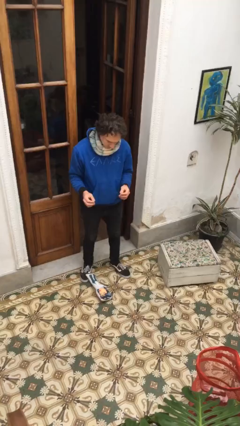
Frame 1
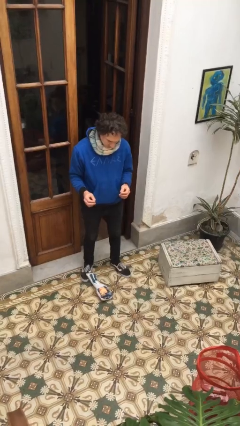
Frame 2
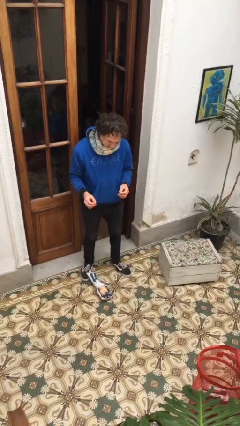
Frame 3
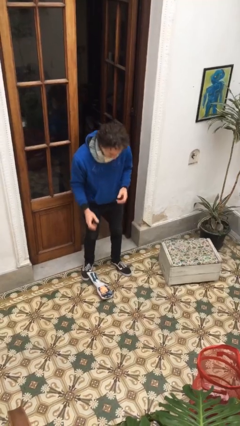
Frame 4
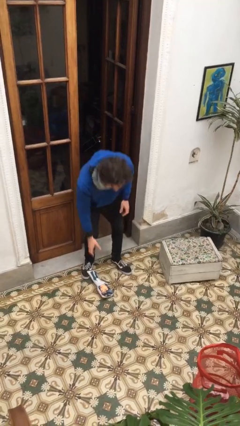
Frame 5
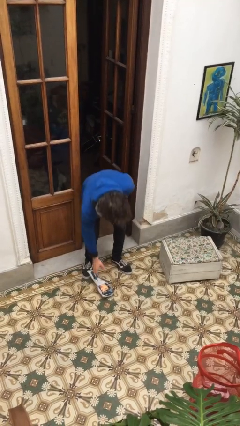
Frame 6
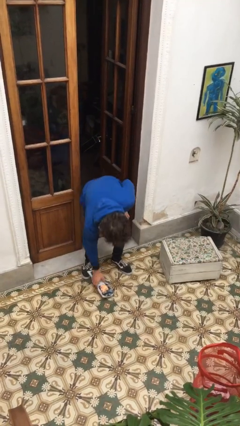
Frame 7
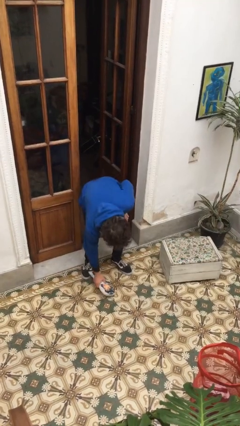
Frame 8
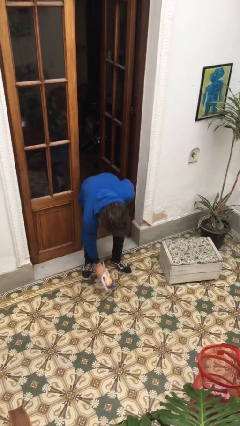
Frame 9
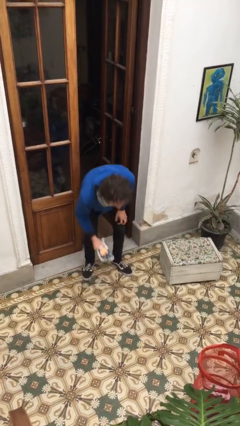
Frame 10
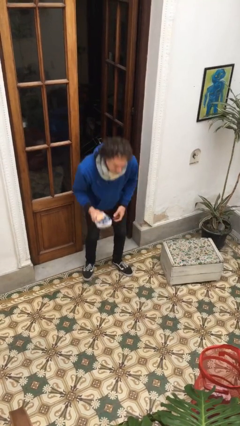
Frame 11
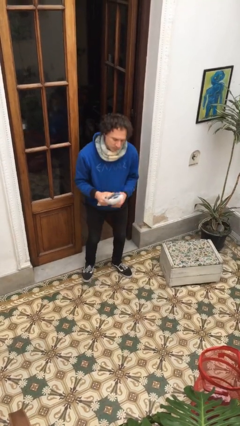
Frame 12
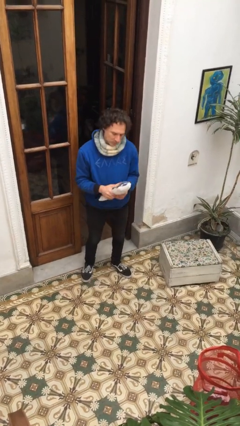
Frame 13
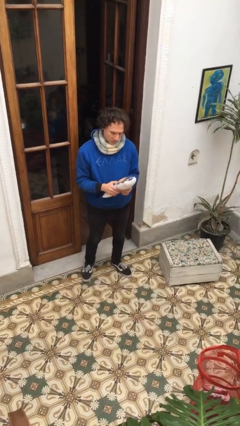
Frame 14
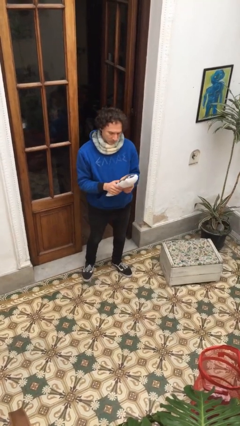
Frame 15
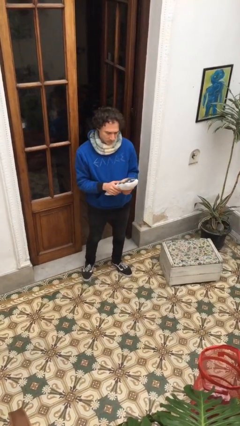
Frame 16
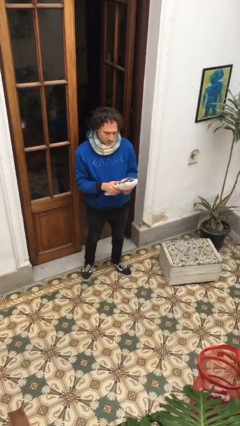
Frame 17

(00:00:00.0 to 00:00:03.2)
person picks up object from floor

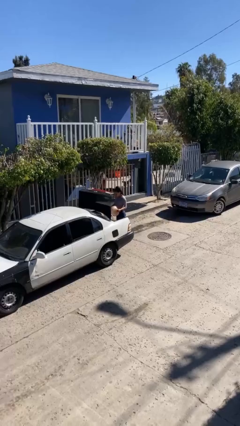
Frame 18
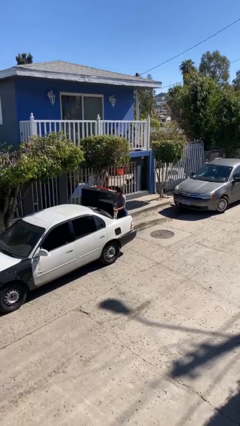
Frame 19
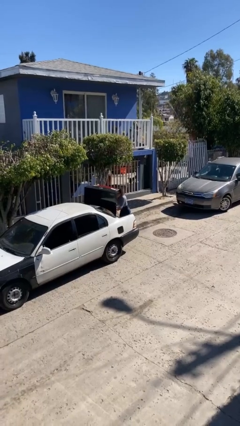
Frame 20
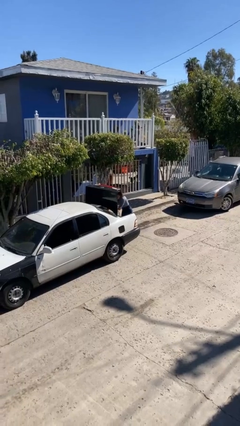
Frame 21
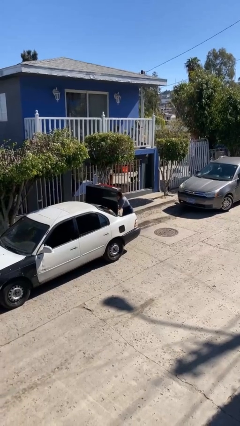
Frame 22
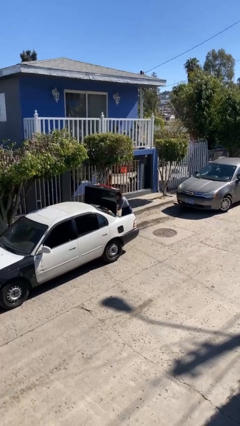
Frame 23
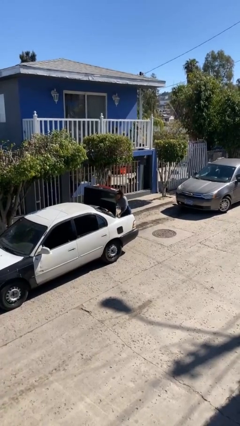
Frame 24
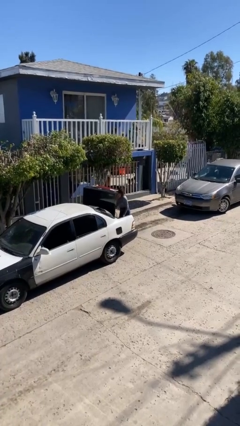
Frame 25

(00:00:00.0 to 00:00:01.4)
person loads car

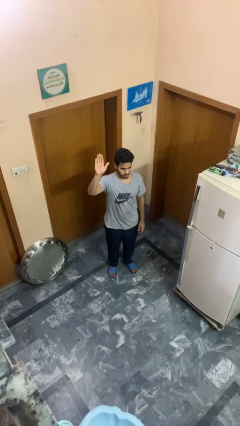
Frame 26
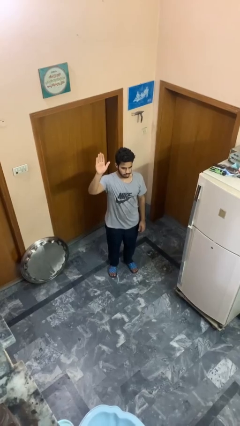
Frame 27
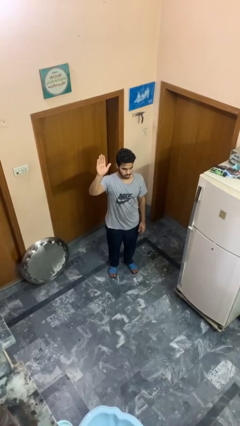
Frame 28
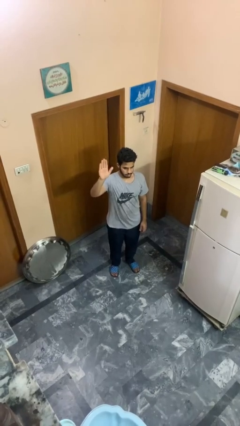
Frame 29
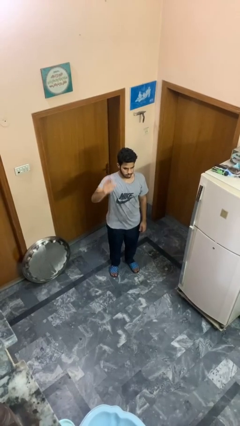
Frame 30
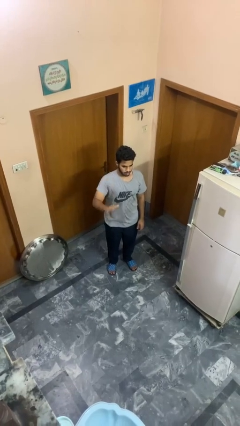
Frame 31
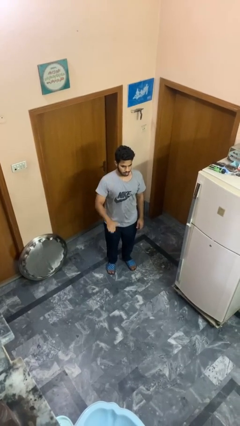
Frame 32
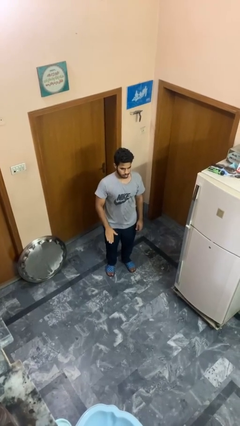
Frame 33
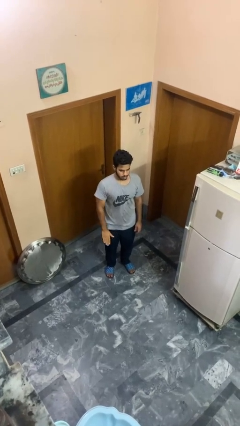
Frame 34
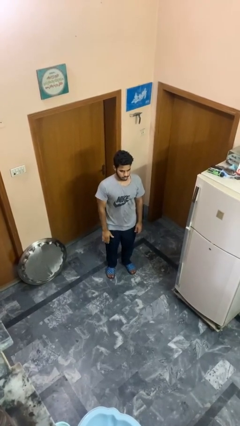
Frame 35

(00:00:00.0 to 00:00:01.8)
person gestures lower hand

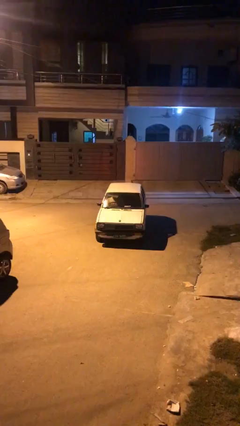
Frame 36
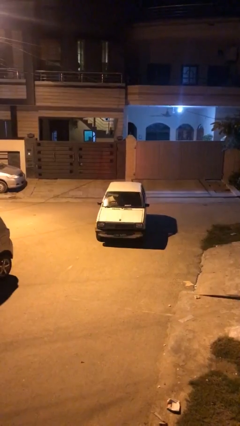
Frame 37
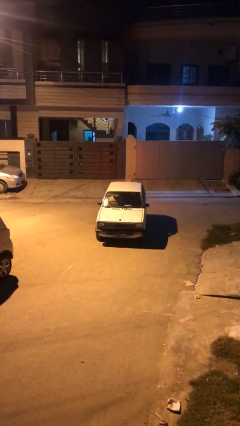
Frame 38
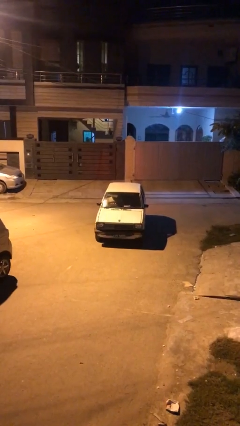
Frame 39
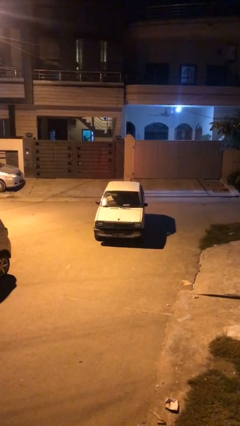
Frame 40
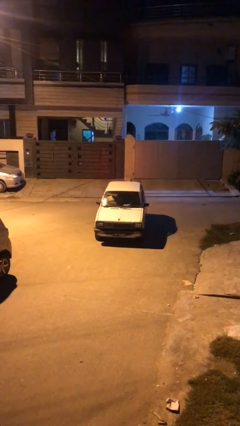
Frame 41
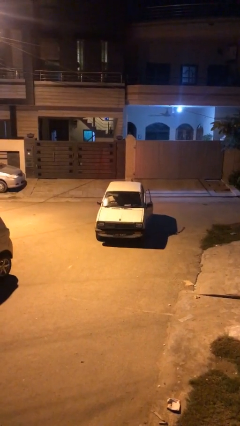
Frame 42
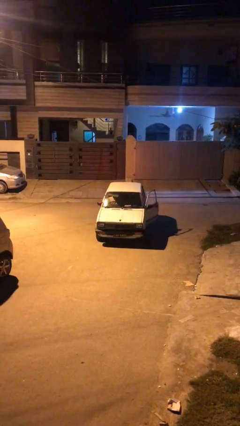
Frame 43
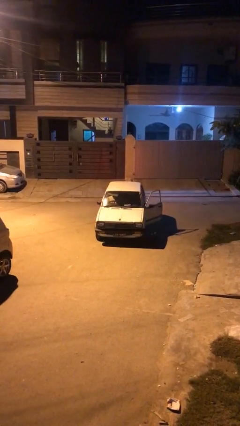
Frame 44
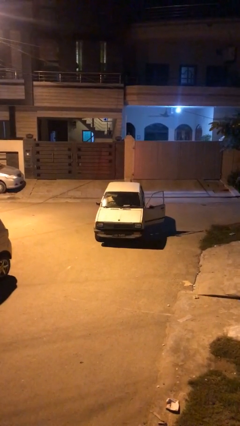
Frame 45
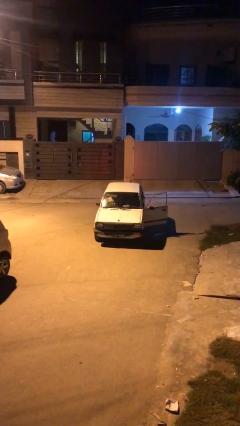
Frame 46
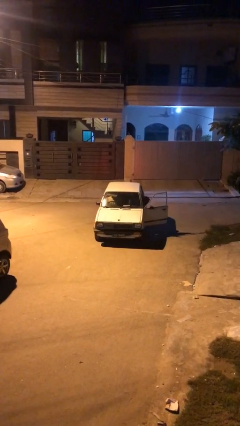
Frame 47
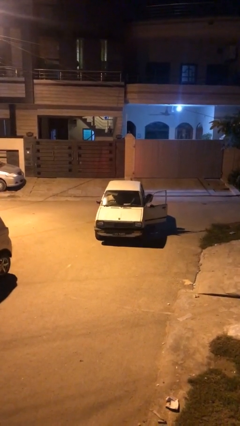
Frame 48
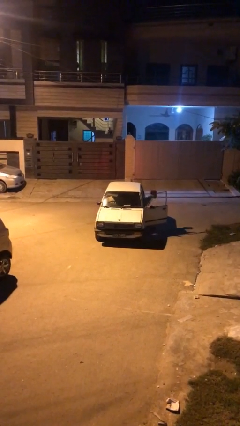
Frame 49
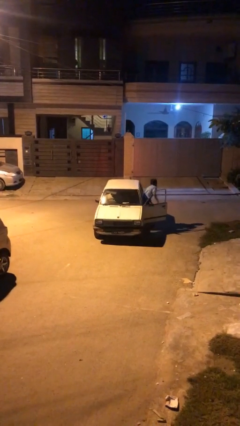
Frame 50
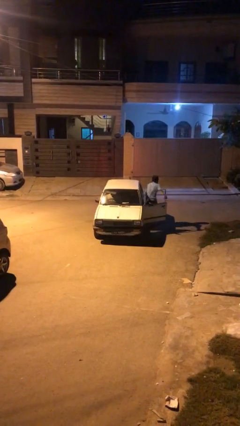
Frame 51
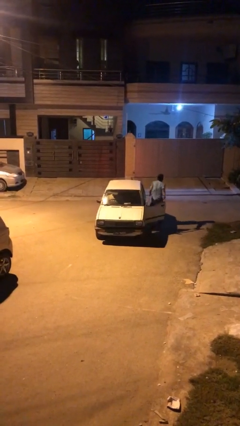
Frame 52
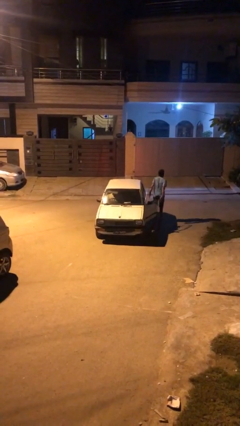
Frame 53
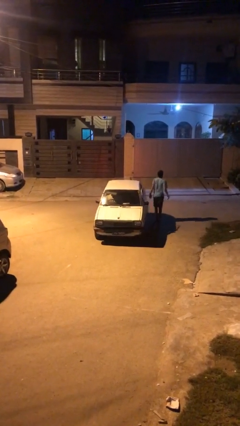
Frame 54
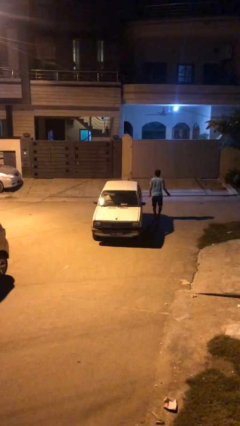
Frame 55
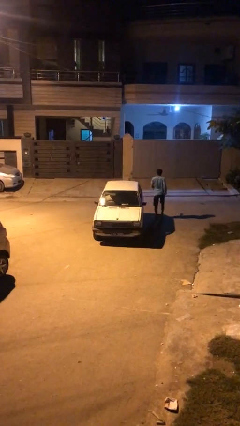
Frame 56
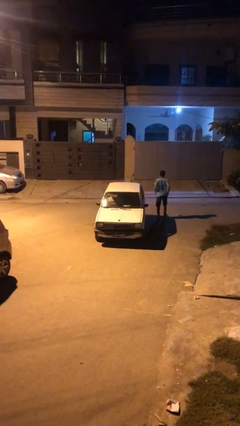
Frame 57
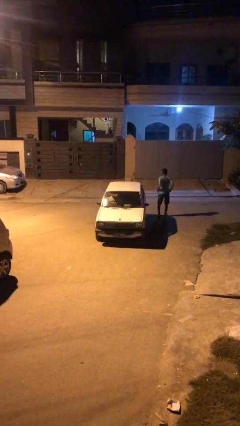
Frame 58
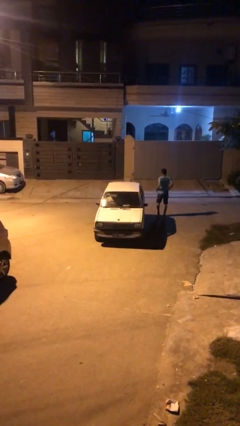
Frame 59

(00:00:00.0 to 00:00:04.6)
car drops off person

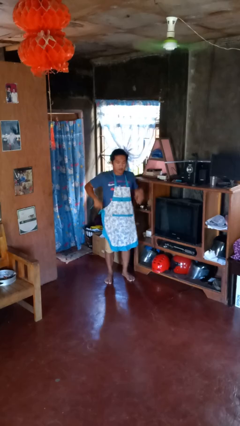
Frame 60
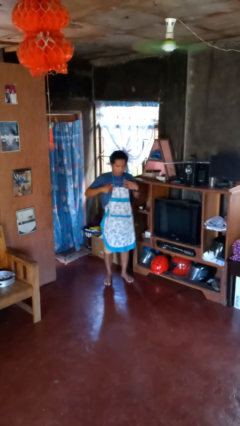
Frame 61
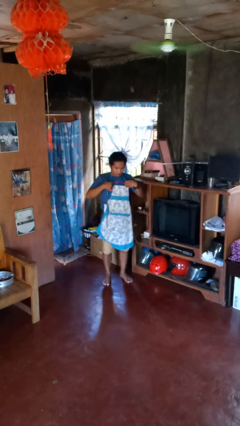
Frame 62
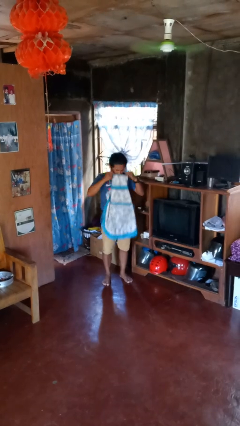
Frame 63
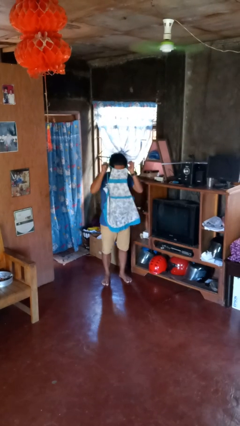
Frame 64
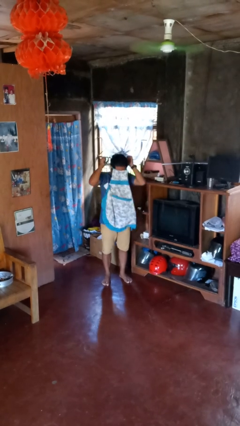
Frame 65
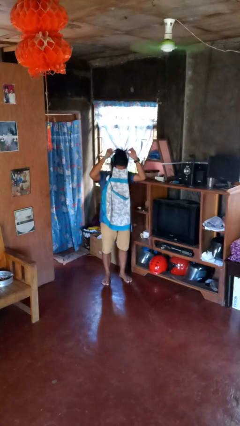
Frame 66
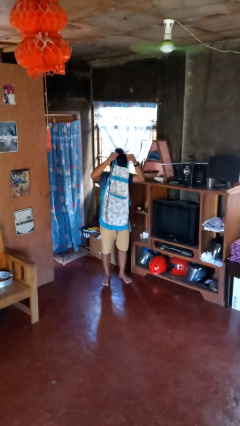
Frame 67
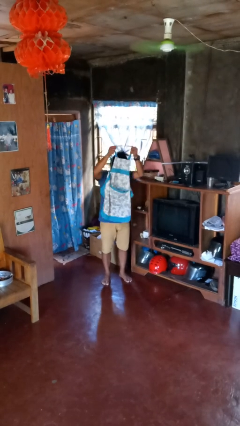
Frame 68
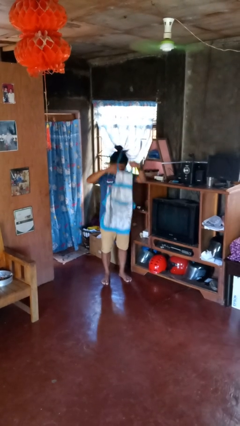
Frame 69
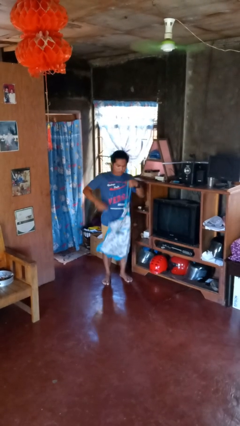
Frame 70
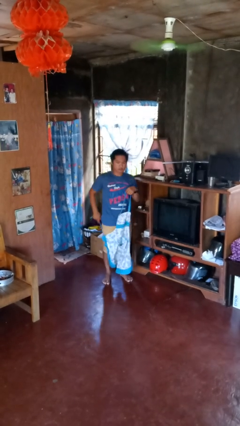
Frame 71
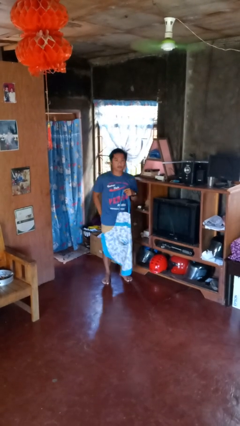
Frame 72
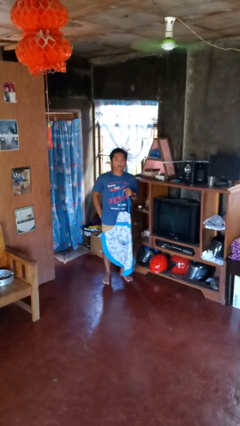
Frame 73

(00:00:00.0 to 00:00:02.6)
person takes off apron

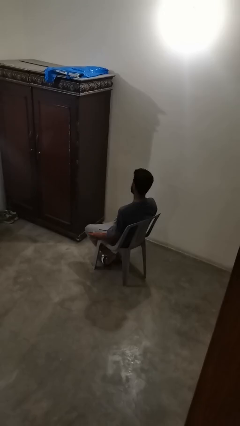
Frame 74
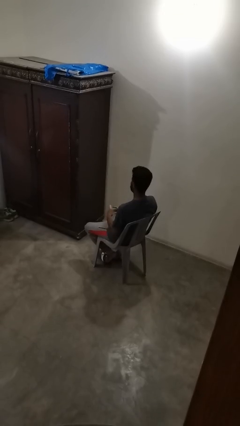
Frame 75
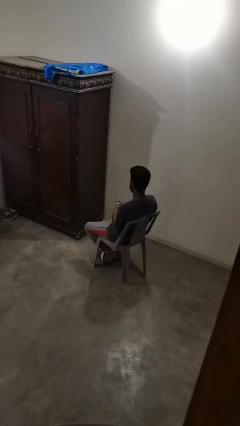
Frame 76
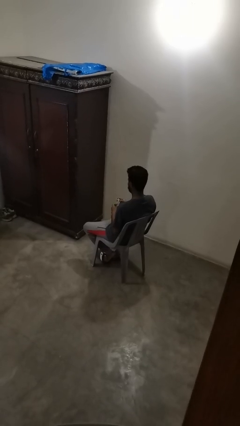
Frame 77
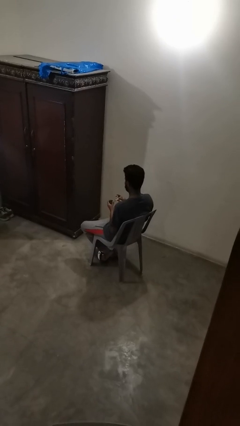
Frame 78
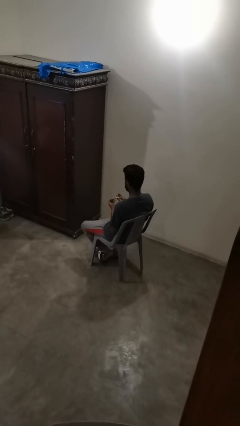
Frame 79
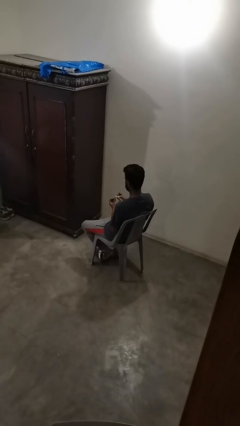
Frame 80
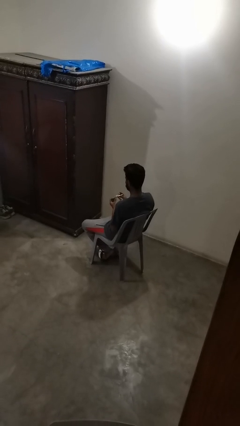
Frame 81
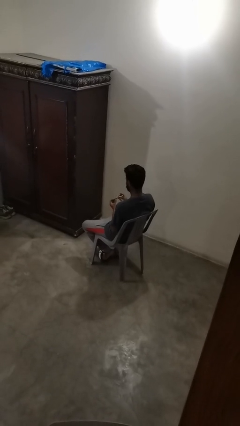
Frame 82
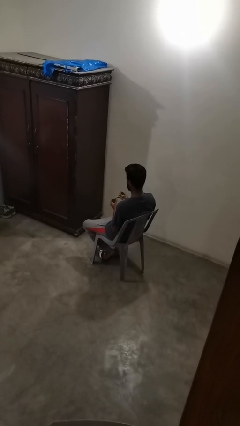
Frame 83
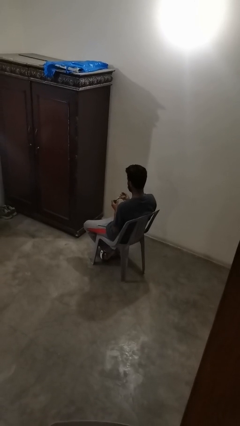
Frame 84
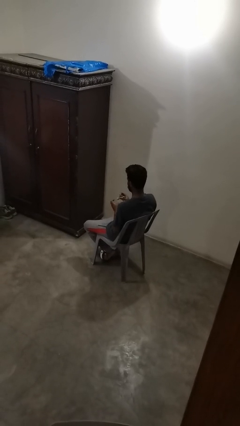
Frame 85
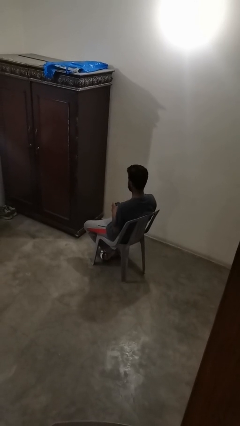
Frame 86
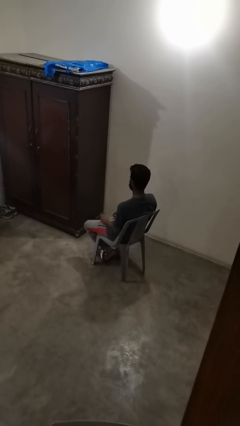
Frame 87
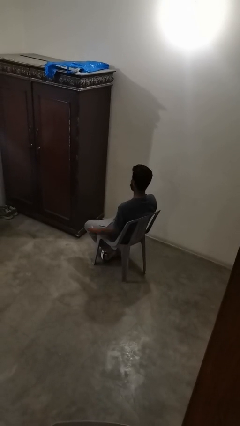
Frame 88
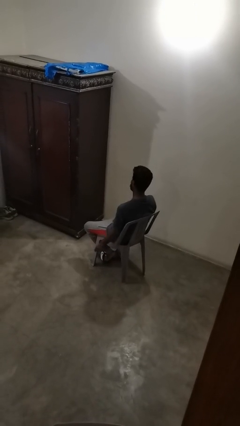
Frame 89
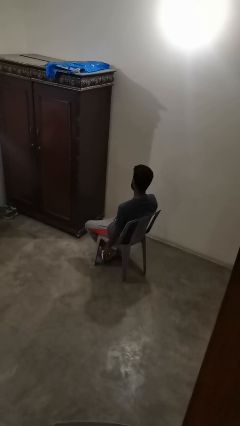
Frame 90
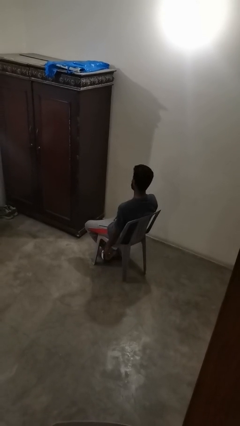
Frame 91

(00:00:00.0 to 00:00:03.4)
person clips fingernails

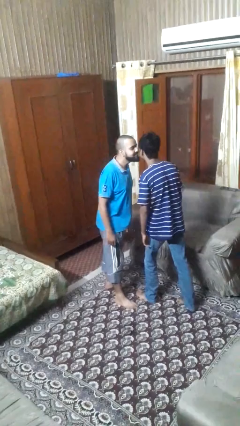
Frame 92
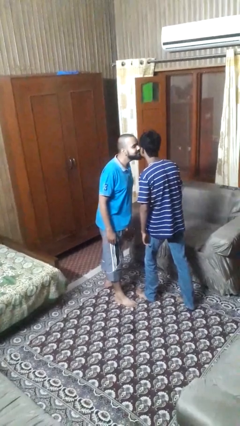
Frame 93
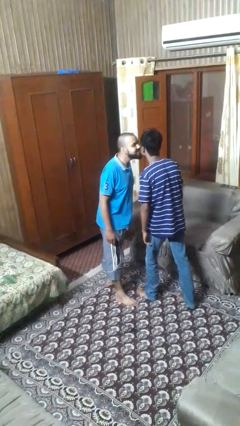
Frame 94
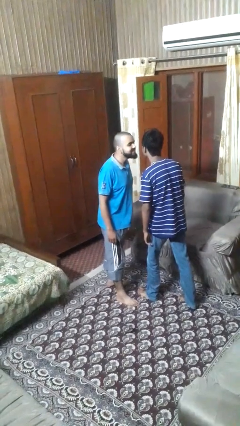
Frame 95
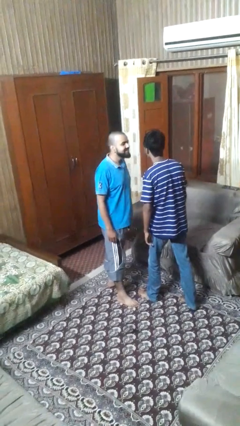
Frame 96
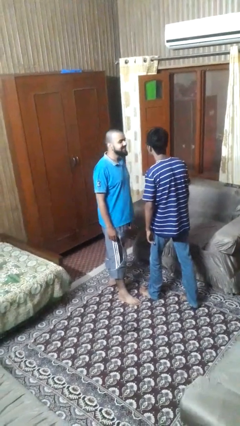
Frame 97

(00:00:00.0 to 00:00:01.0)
person kisses cheek of person
